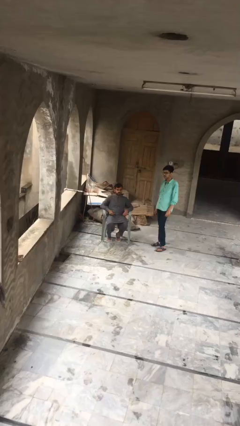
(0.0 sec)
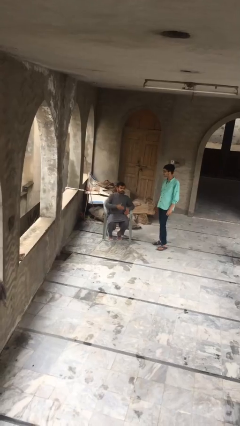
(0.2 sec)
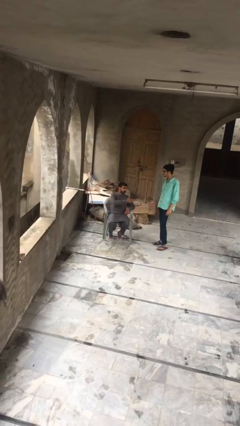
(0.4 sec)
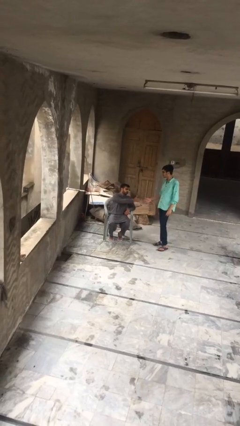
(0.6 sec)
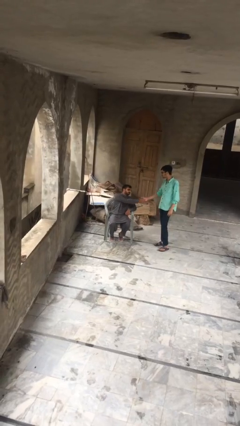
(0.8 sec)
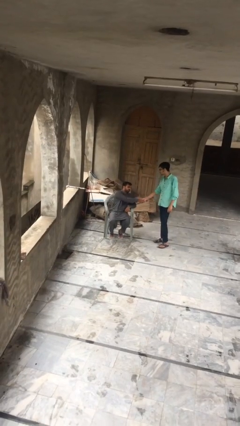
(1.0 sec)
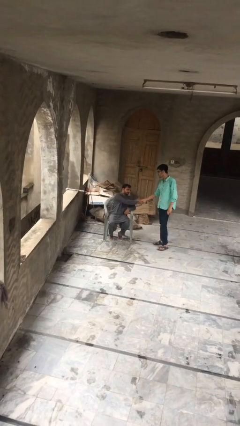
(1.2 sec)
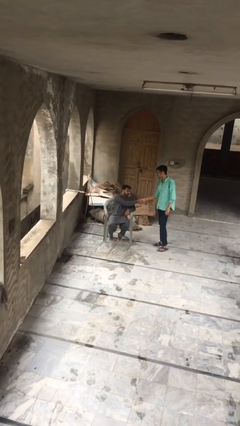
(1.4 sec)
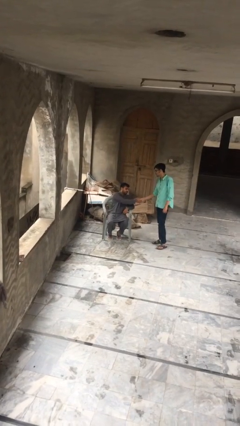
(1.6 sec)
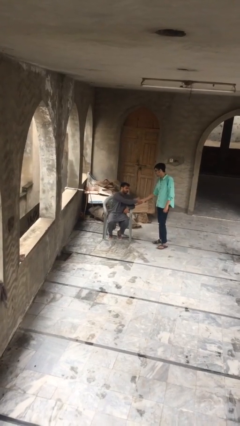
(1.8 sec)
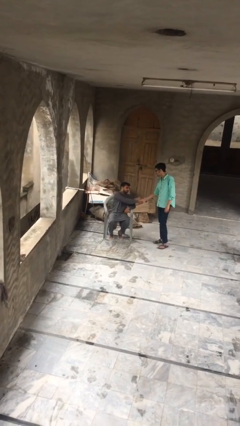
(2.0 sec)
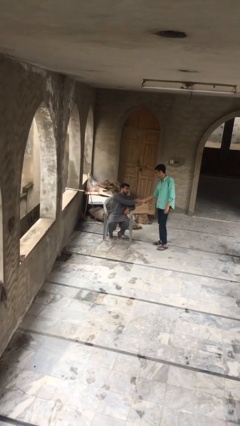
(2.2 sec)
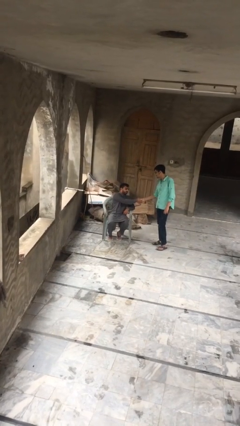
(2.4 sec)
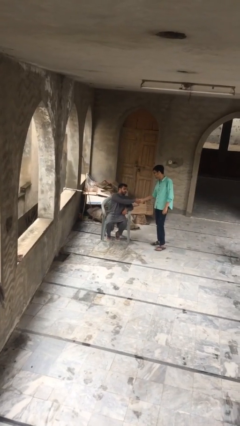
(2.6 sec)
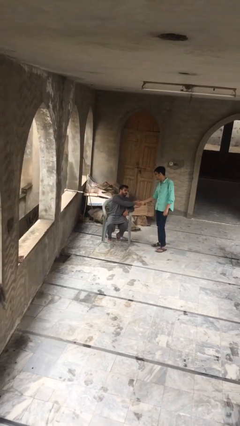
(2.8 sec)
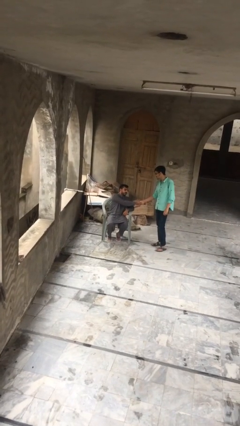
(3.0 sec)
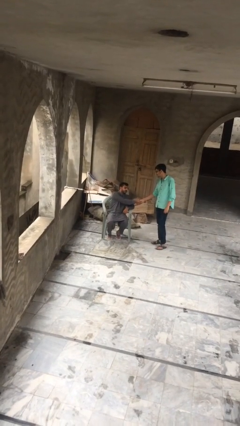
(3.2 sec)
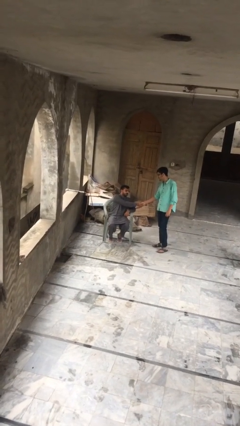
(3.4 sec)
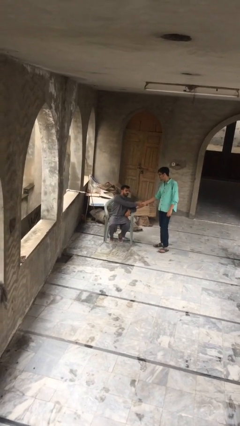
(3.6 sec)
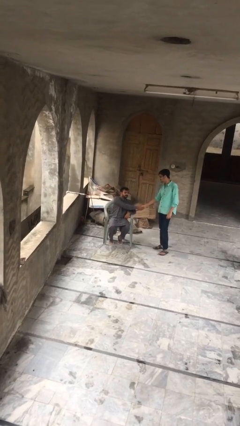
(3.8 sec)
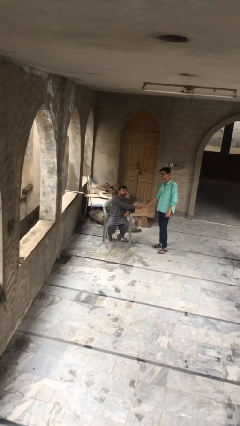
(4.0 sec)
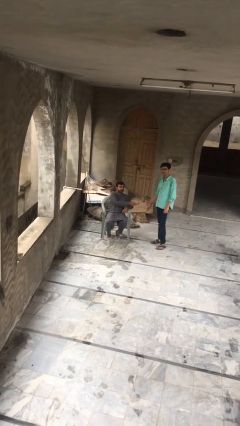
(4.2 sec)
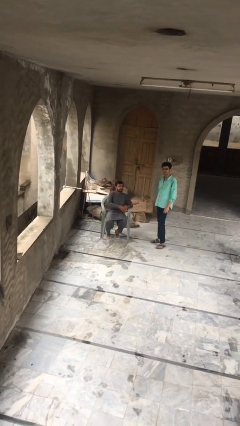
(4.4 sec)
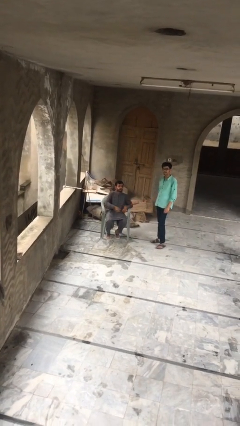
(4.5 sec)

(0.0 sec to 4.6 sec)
person shakes hand

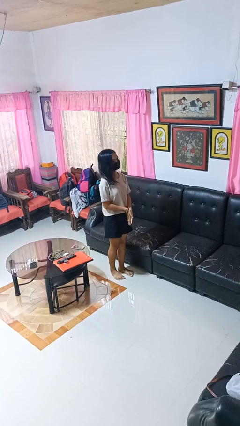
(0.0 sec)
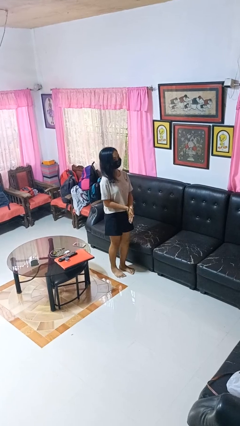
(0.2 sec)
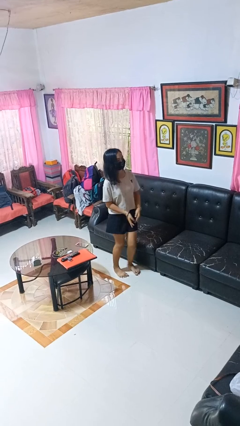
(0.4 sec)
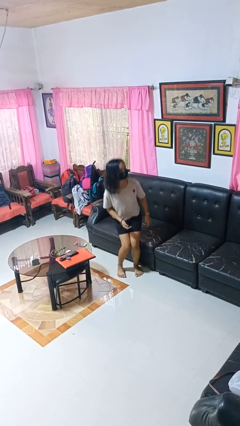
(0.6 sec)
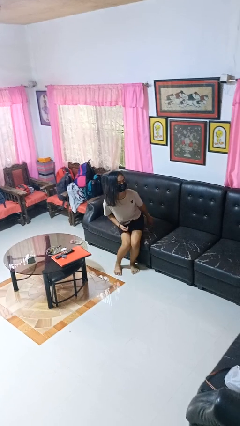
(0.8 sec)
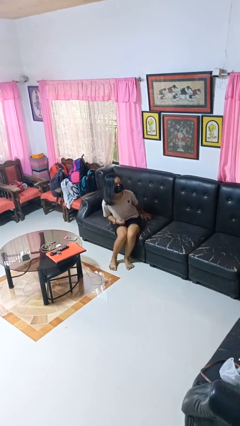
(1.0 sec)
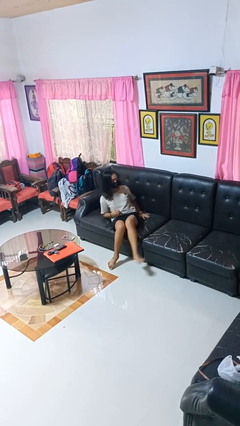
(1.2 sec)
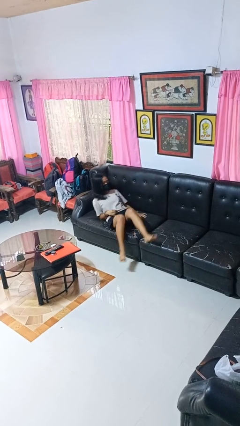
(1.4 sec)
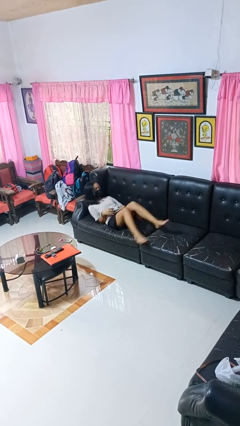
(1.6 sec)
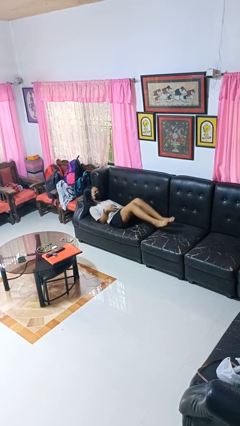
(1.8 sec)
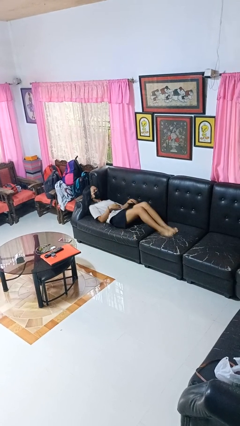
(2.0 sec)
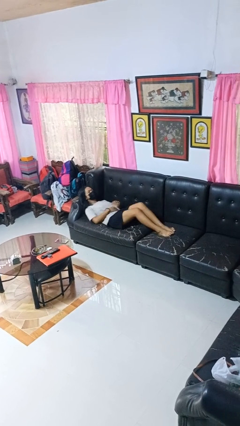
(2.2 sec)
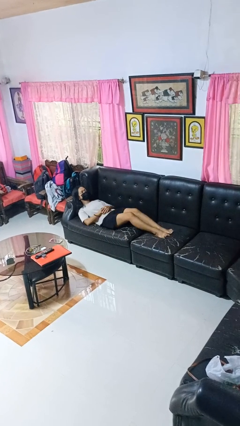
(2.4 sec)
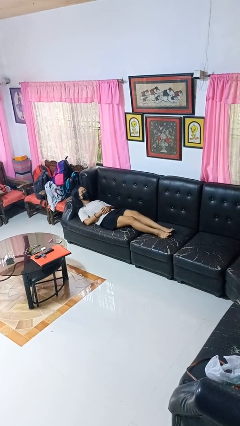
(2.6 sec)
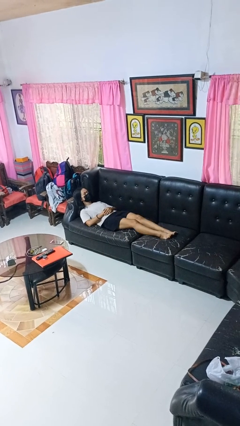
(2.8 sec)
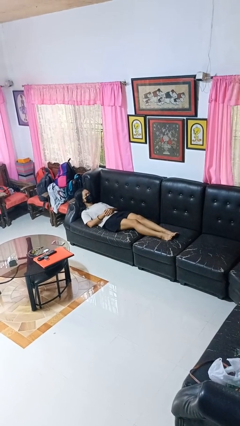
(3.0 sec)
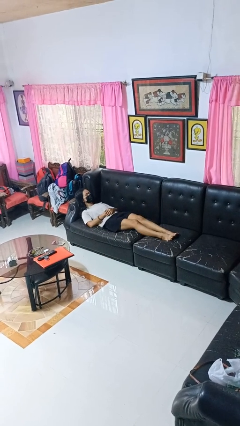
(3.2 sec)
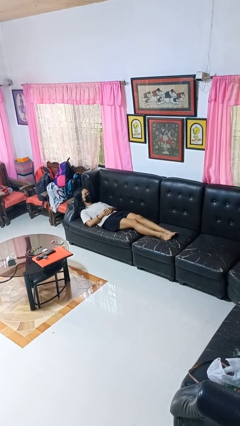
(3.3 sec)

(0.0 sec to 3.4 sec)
person lies down on couch

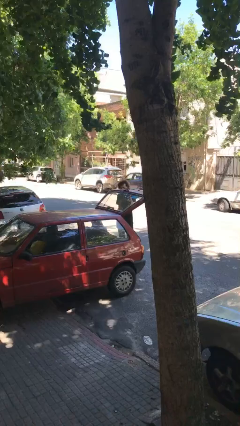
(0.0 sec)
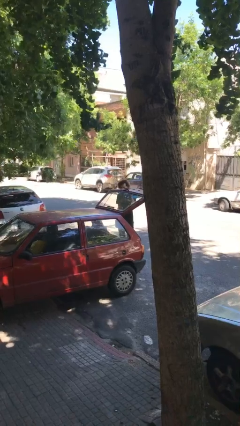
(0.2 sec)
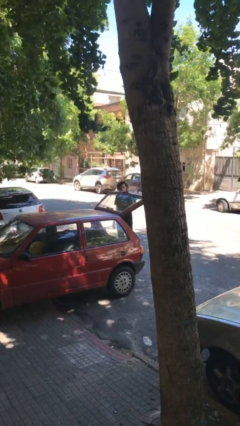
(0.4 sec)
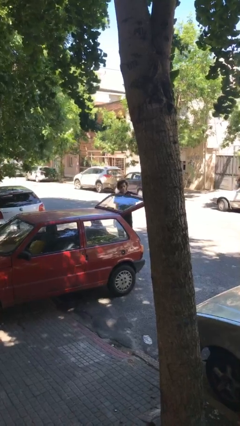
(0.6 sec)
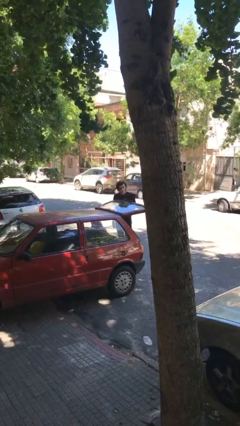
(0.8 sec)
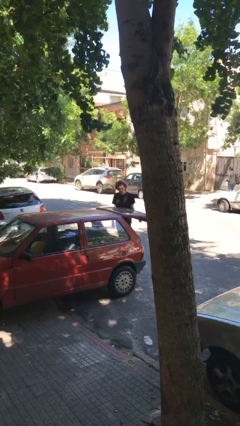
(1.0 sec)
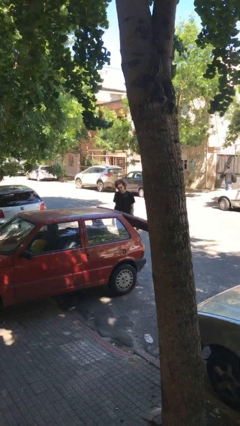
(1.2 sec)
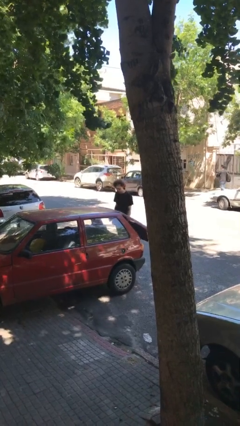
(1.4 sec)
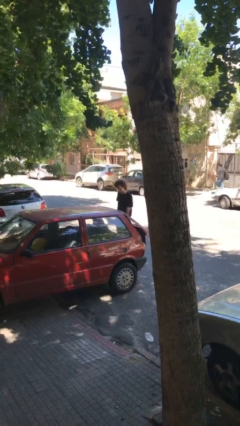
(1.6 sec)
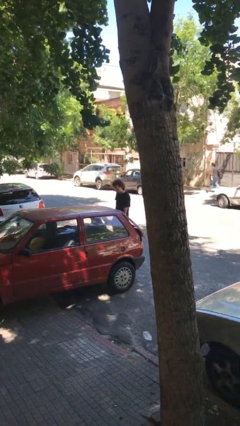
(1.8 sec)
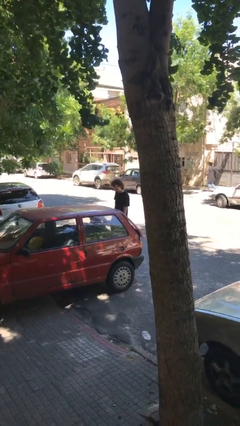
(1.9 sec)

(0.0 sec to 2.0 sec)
person closes car trunk

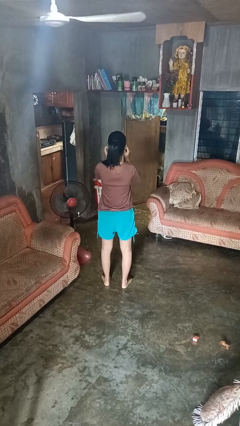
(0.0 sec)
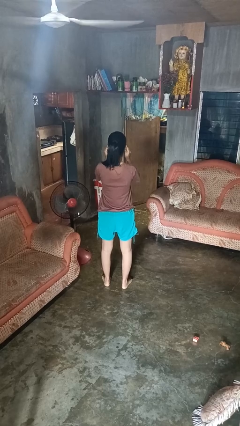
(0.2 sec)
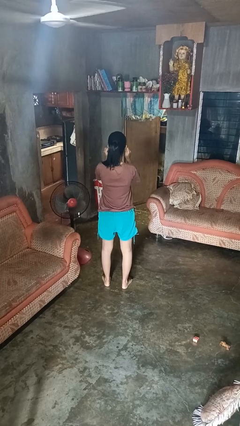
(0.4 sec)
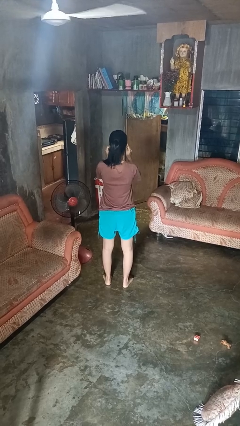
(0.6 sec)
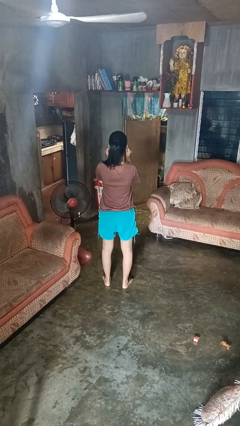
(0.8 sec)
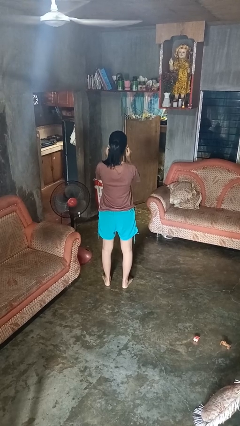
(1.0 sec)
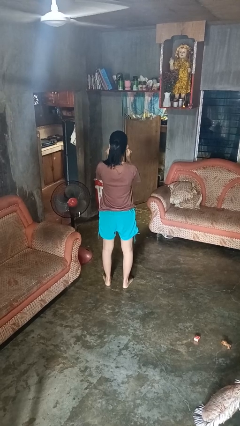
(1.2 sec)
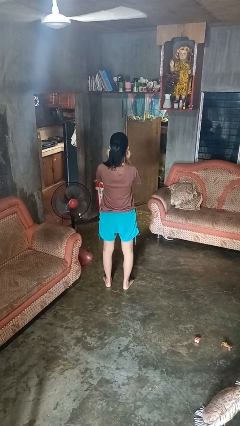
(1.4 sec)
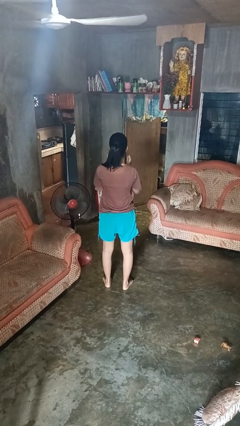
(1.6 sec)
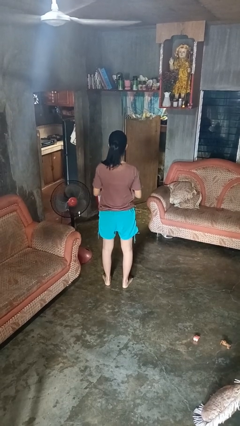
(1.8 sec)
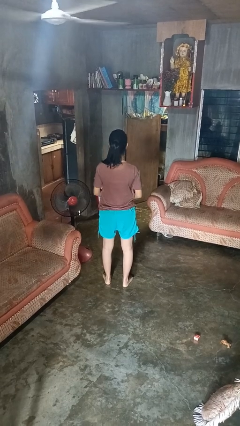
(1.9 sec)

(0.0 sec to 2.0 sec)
person touches earlobe

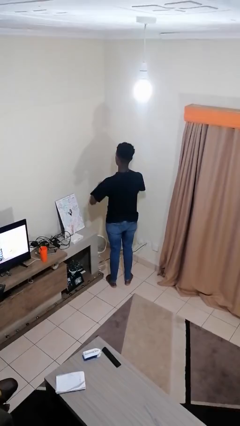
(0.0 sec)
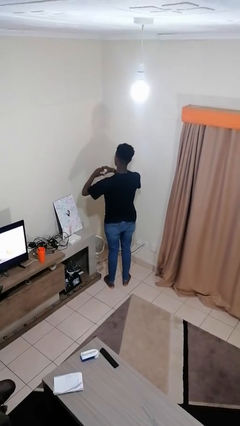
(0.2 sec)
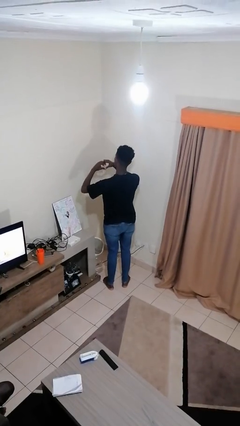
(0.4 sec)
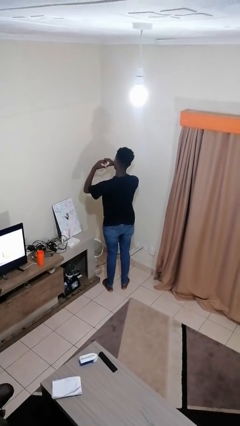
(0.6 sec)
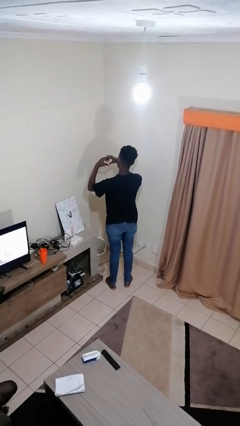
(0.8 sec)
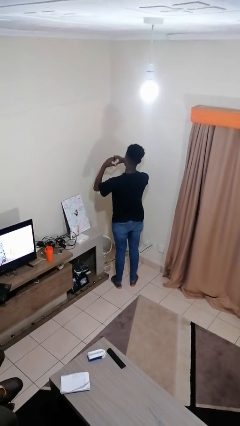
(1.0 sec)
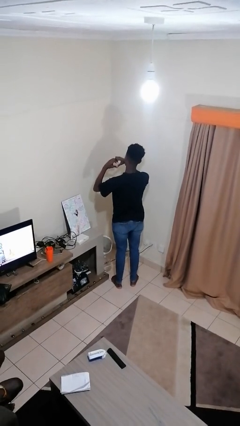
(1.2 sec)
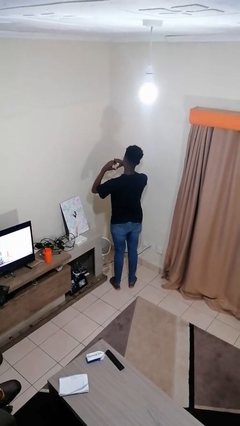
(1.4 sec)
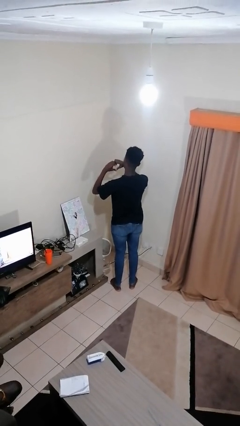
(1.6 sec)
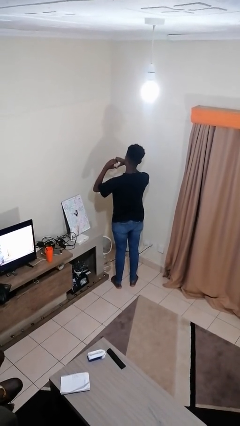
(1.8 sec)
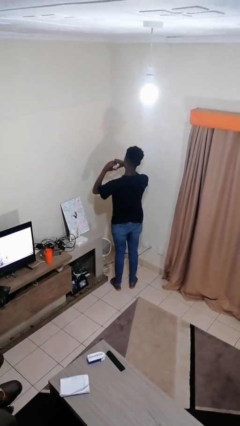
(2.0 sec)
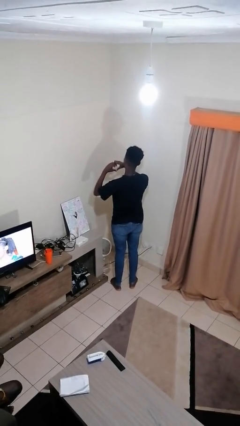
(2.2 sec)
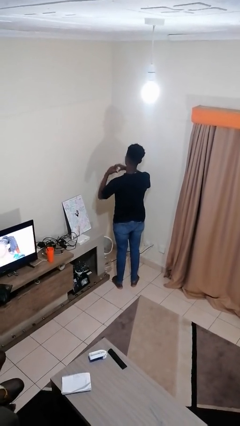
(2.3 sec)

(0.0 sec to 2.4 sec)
person gestures heart

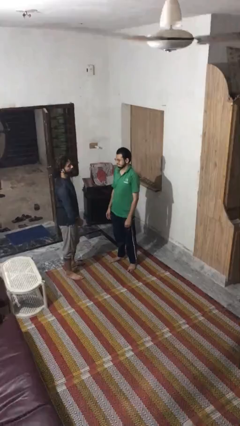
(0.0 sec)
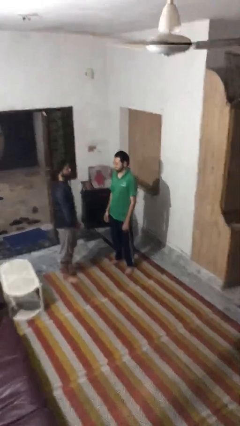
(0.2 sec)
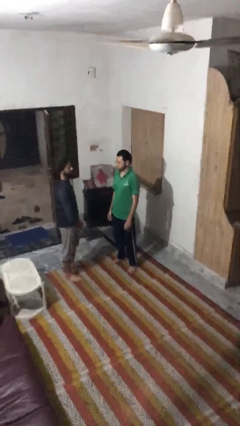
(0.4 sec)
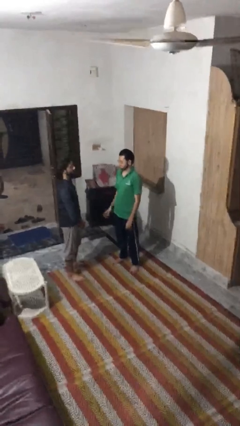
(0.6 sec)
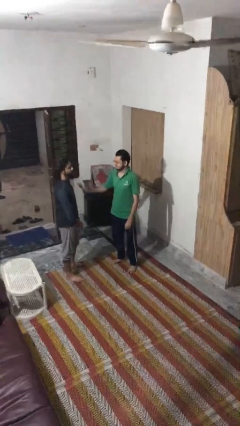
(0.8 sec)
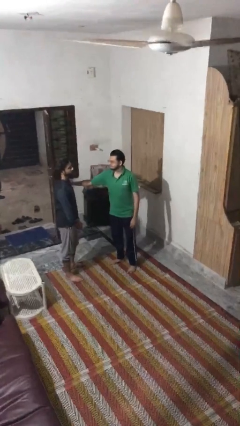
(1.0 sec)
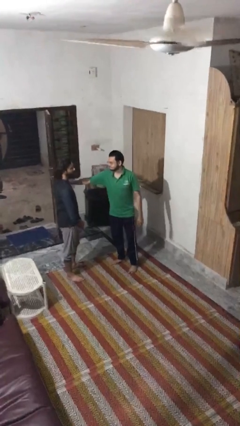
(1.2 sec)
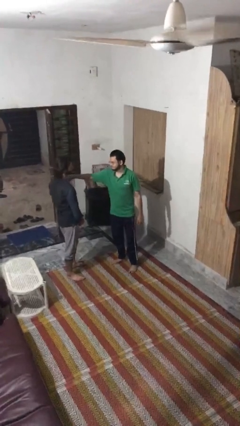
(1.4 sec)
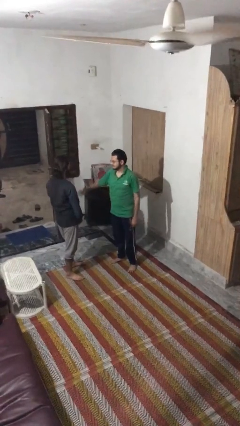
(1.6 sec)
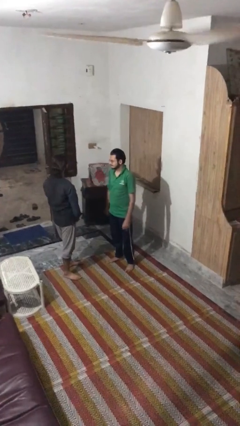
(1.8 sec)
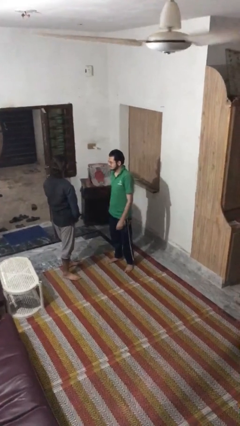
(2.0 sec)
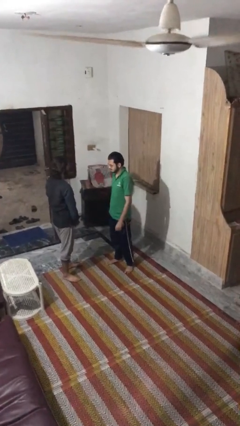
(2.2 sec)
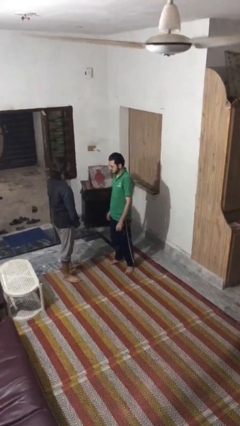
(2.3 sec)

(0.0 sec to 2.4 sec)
person shoves person

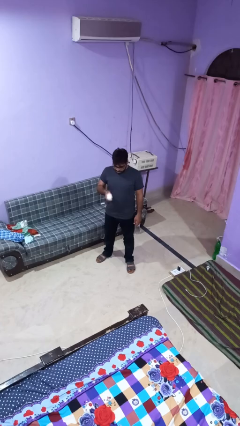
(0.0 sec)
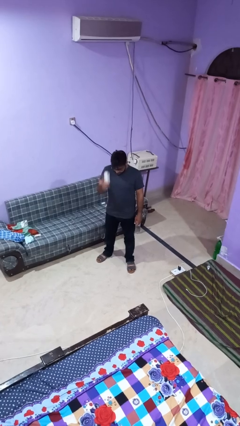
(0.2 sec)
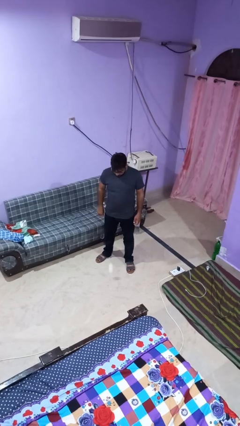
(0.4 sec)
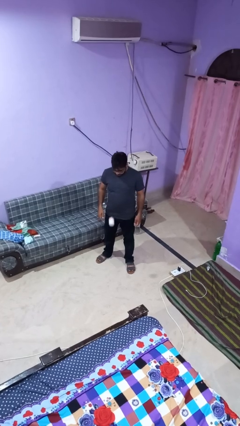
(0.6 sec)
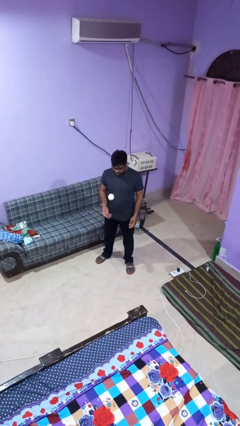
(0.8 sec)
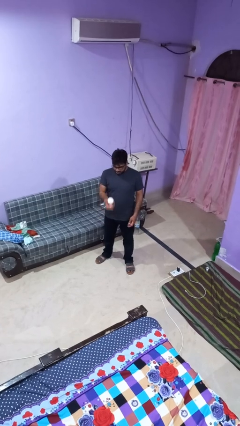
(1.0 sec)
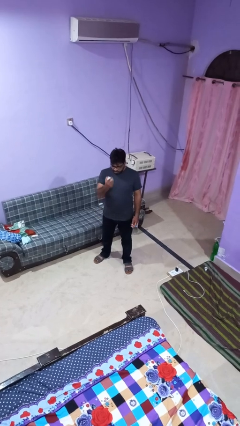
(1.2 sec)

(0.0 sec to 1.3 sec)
person bounces ball on floor
